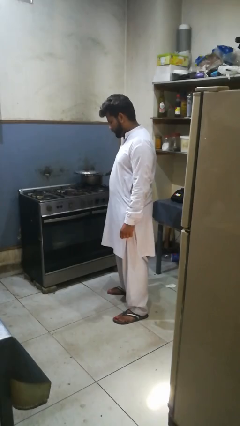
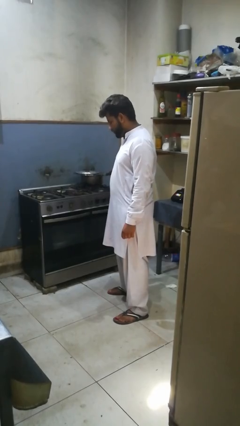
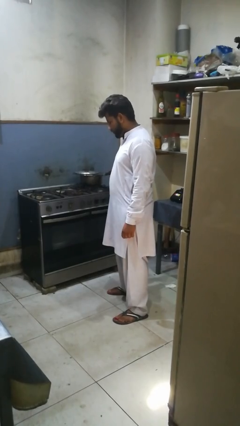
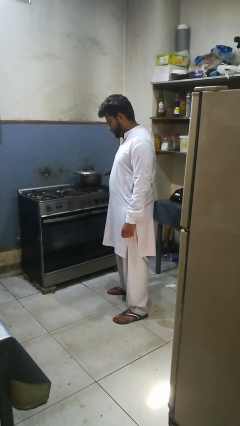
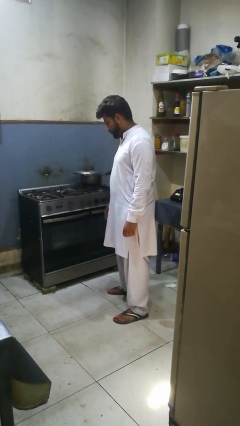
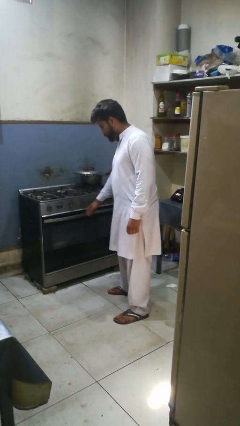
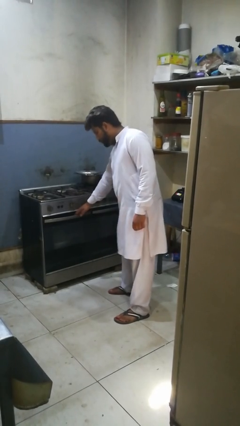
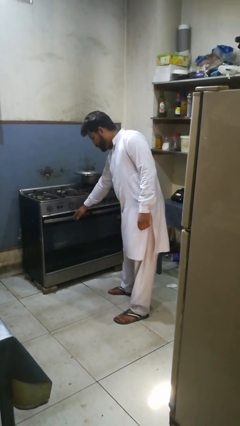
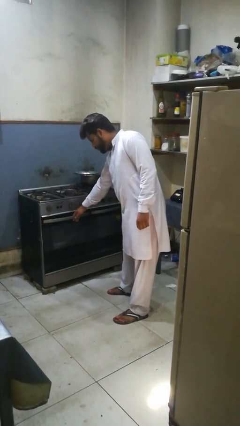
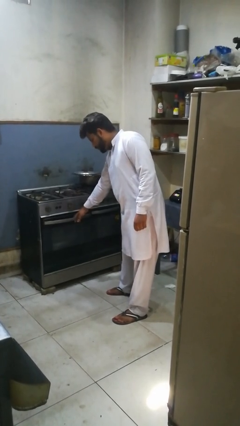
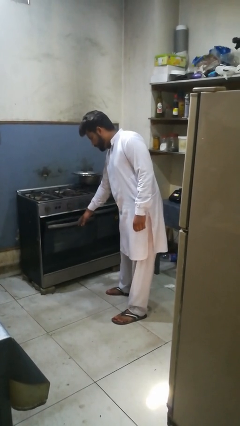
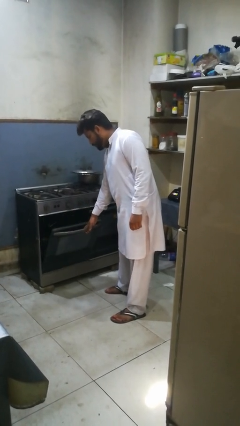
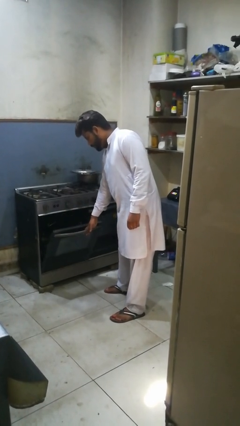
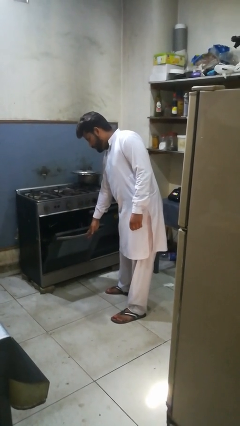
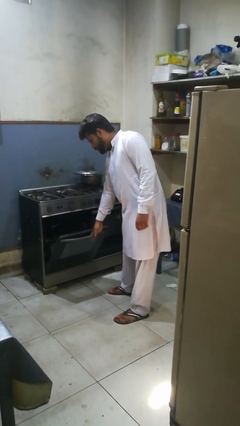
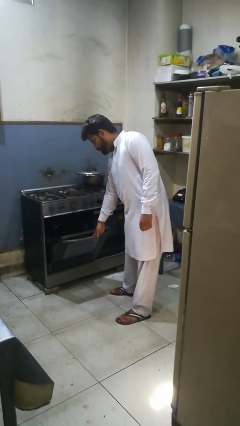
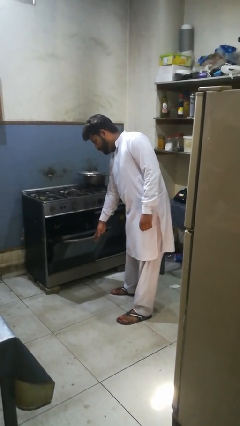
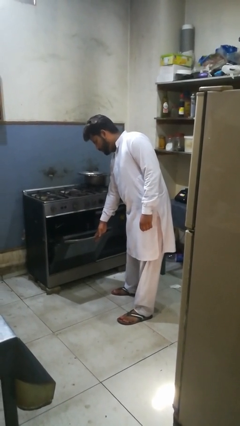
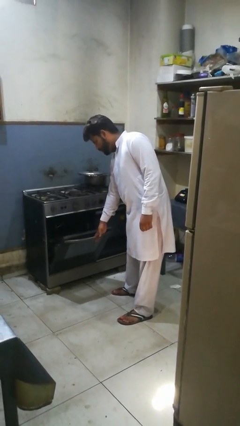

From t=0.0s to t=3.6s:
person opens oven door

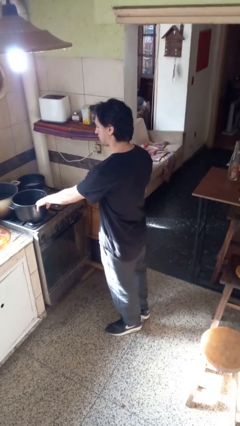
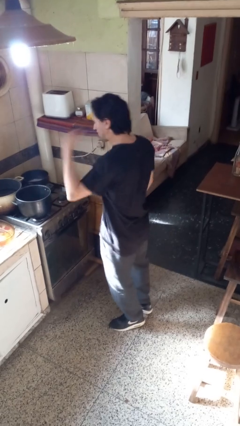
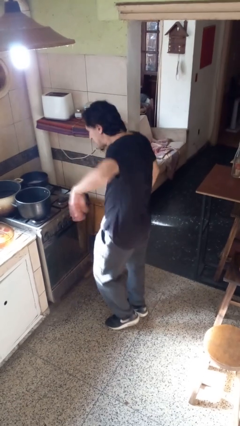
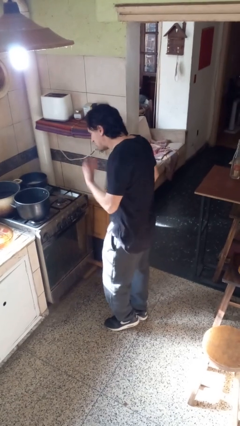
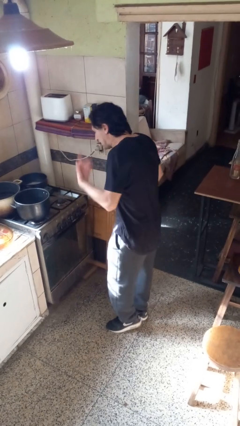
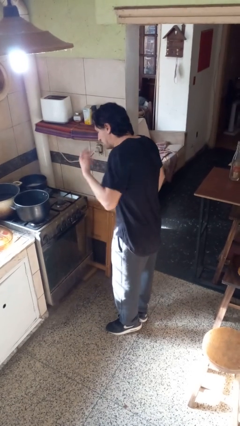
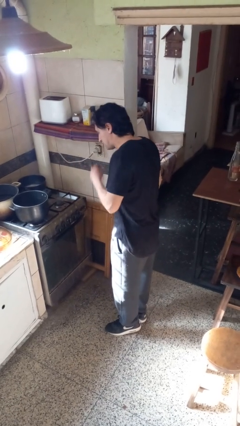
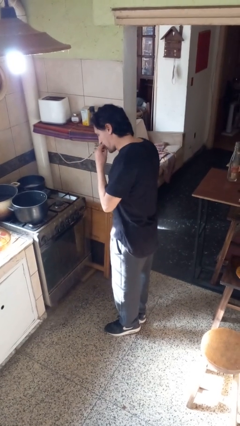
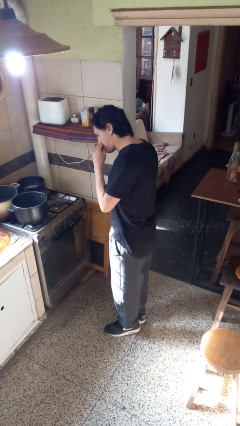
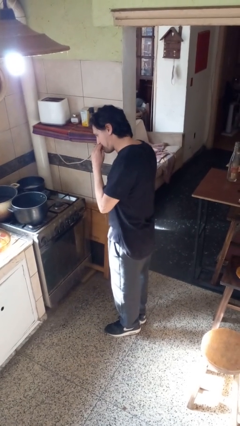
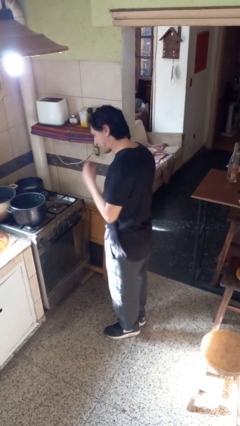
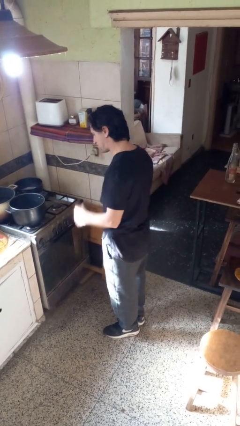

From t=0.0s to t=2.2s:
person burns hand

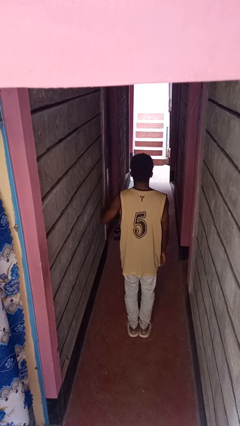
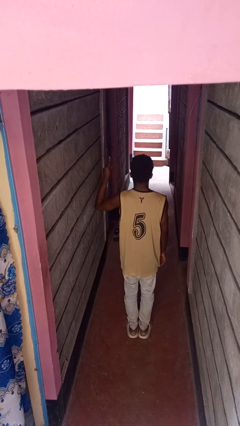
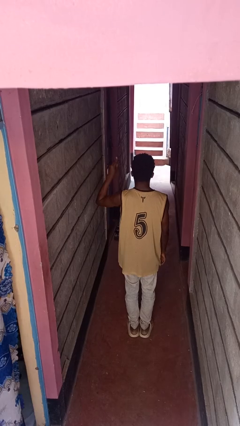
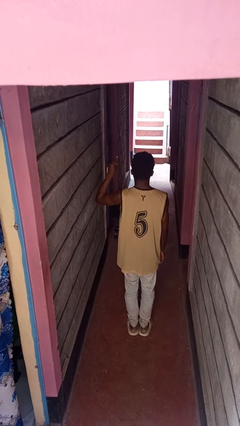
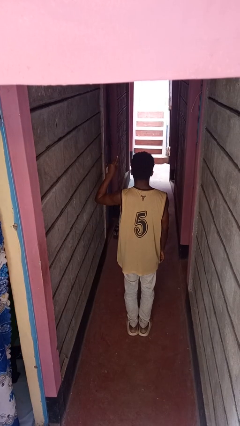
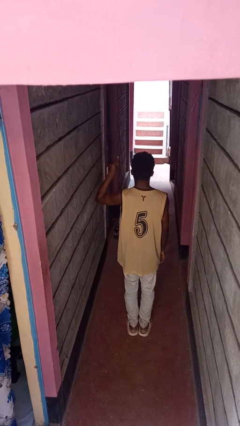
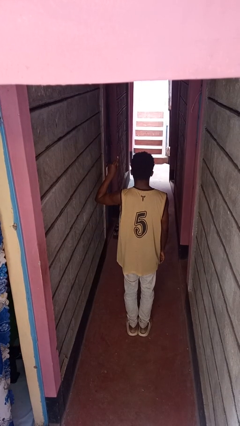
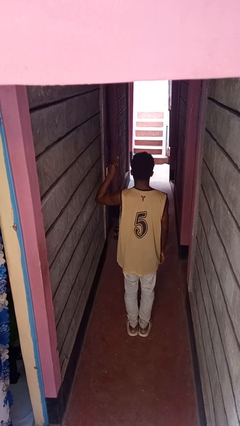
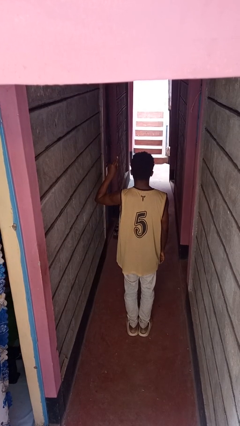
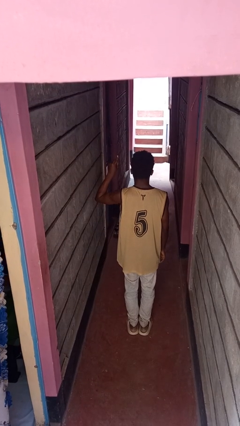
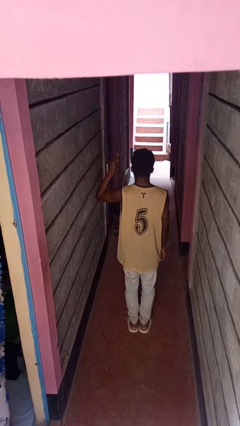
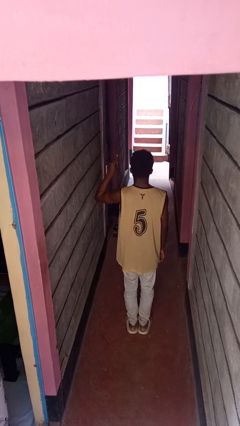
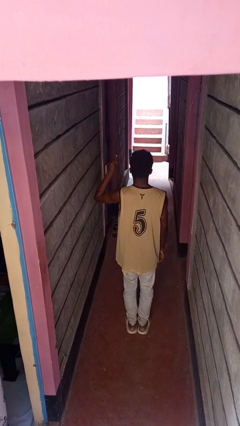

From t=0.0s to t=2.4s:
person gestures number one

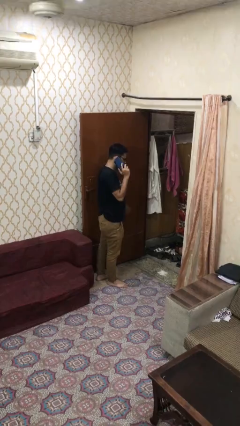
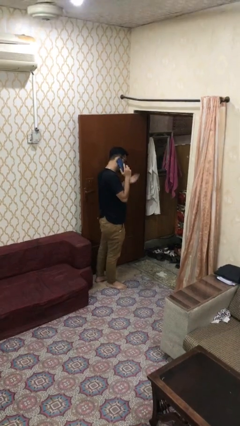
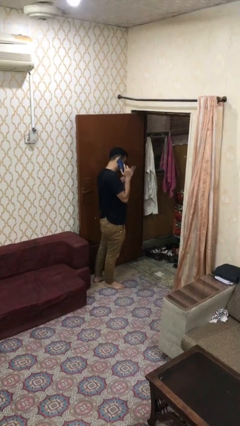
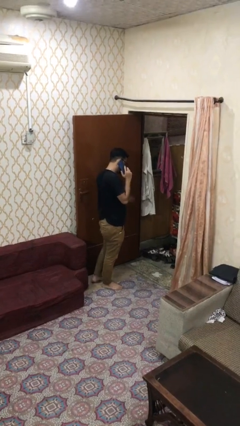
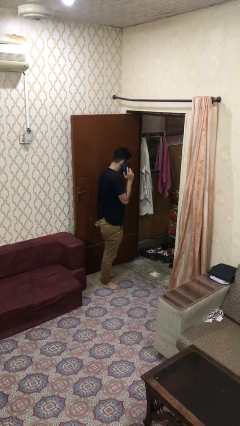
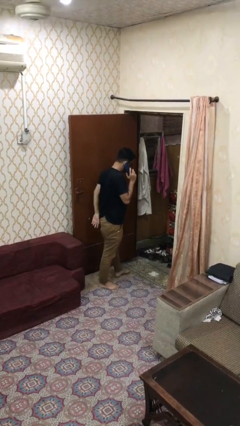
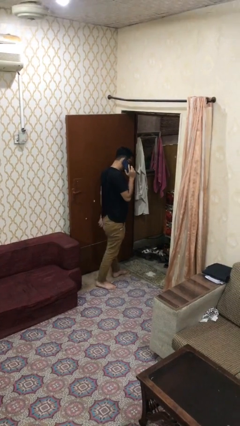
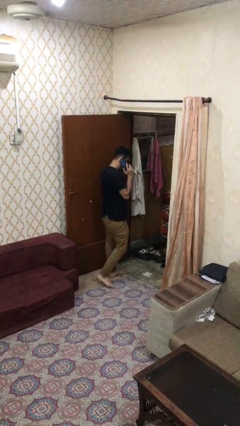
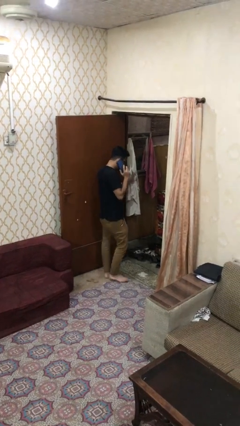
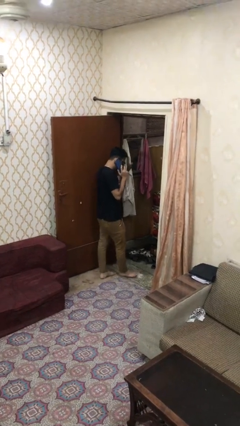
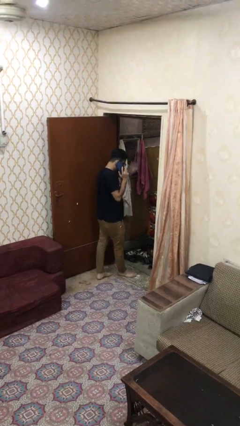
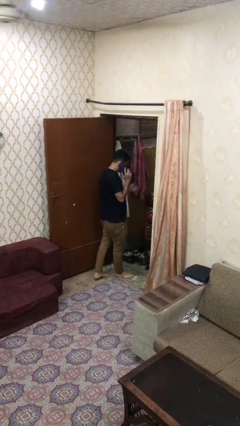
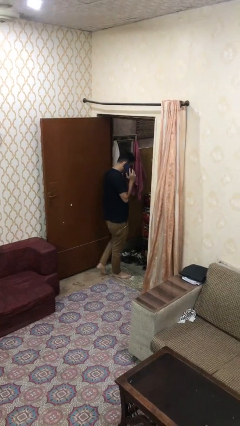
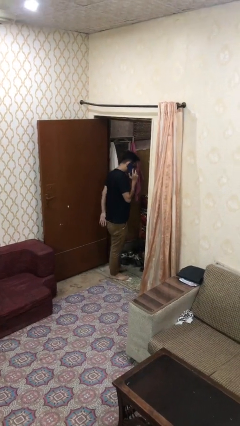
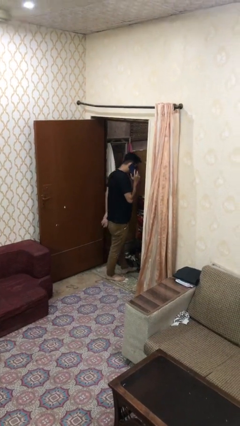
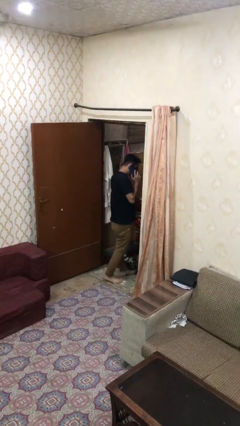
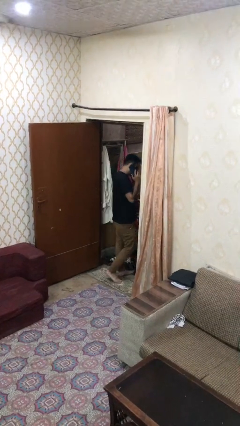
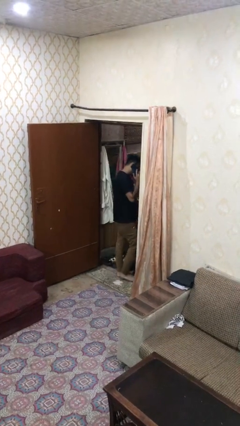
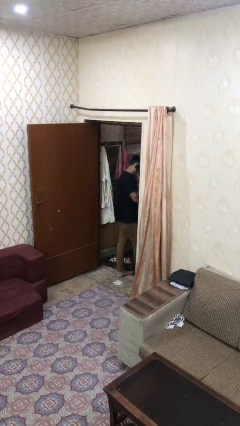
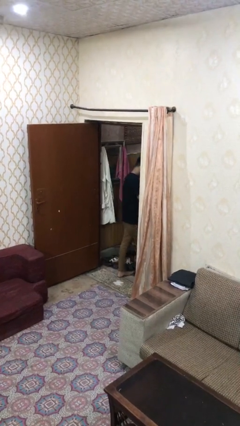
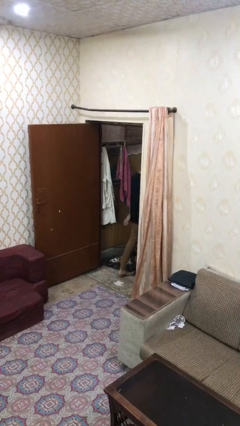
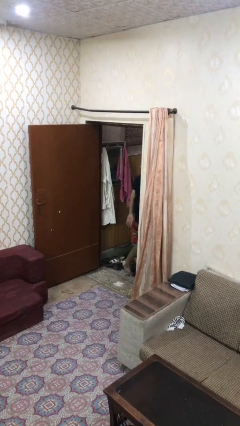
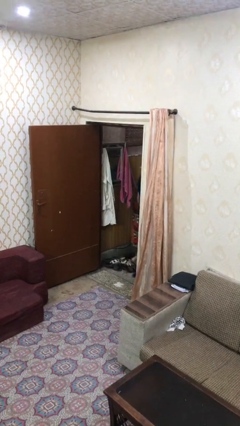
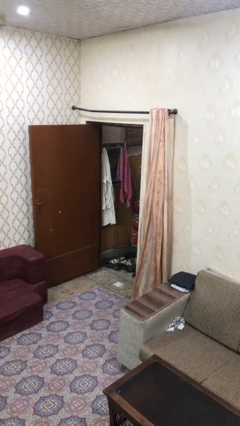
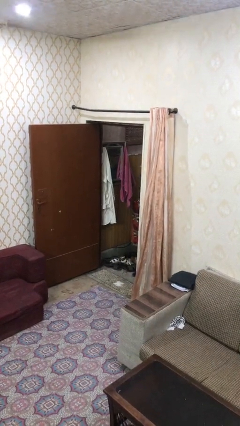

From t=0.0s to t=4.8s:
person exits scene through structure

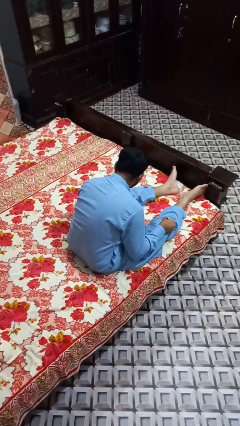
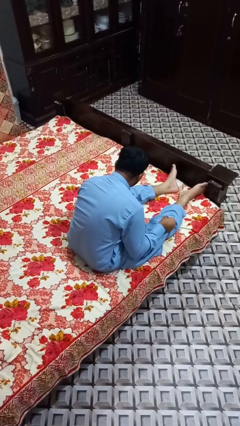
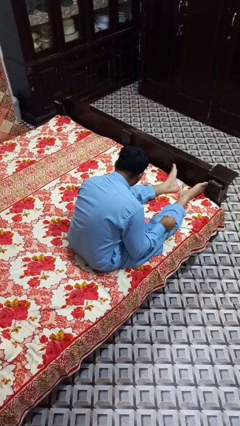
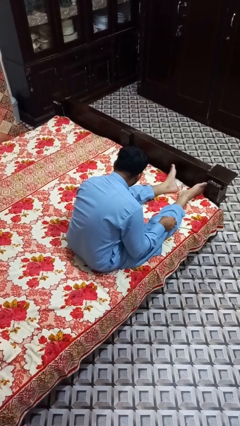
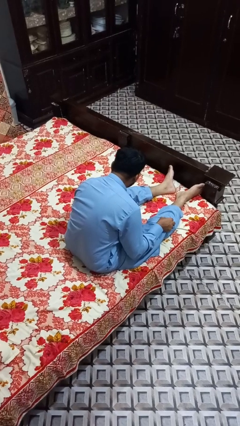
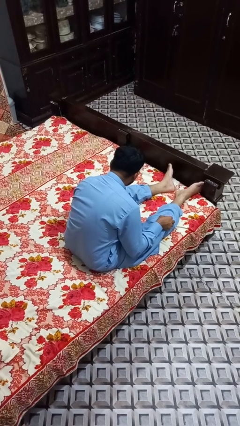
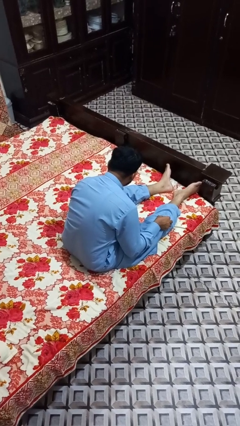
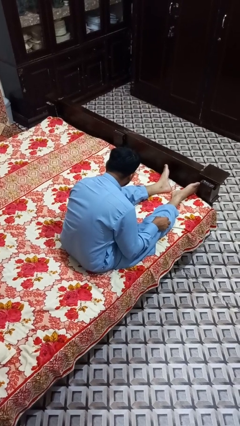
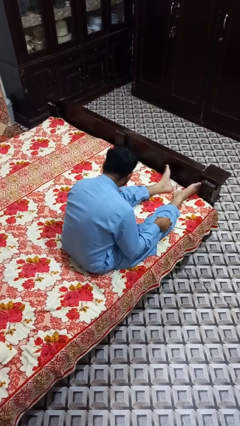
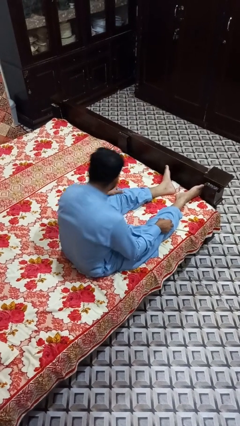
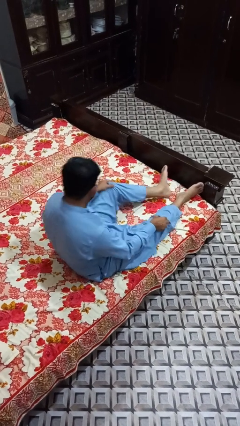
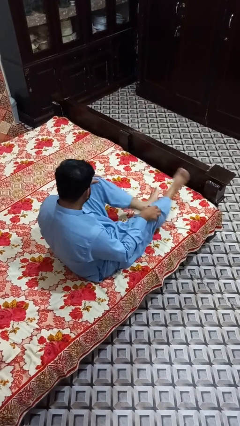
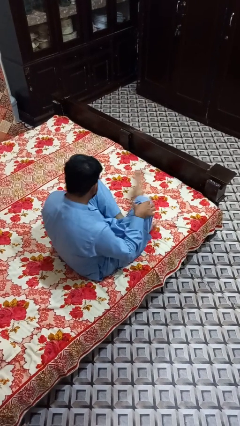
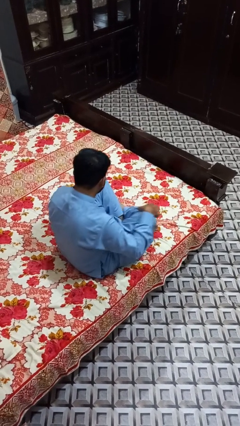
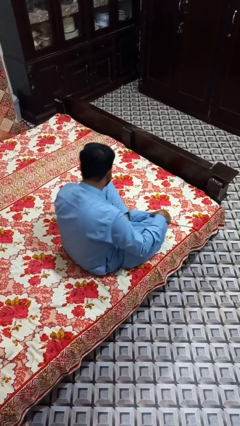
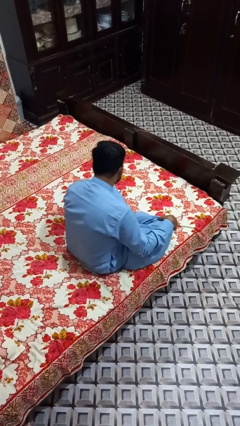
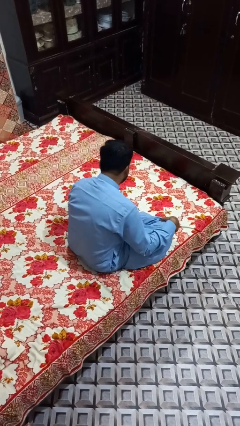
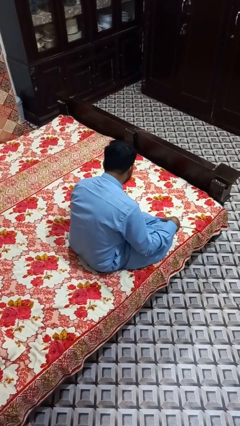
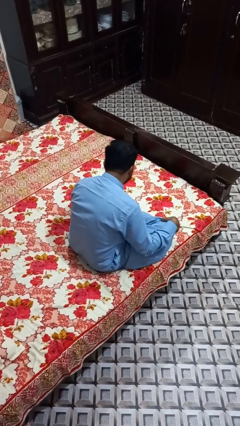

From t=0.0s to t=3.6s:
person crosses legs

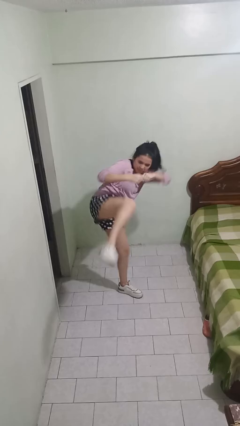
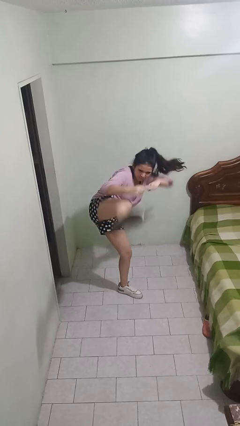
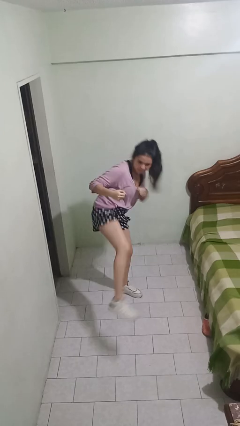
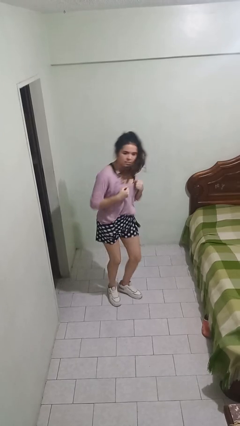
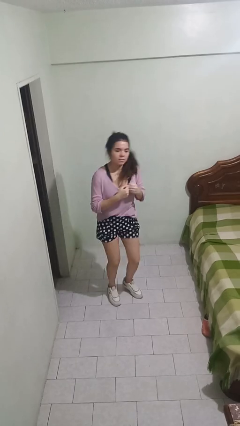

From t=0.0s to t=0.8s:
person karate kicks

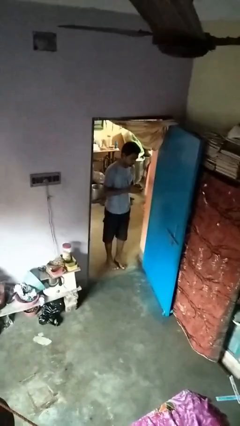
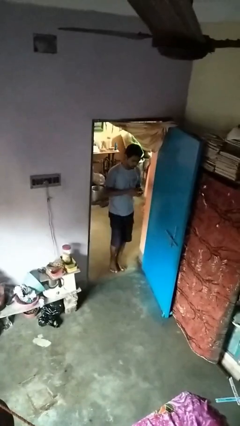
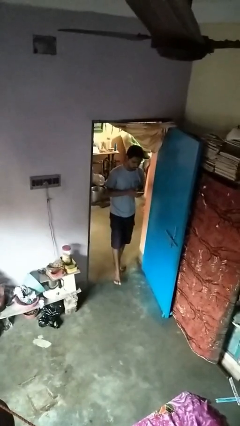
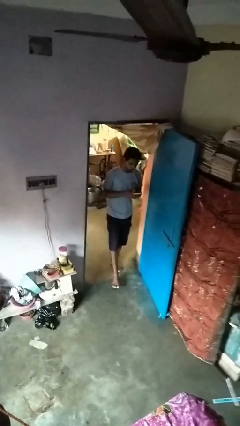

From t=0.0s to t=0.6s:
person enters scene through structure
